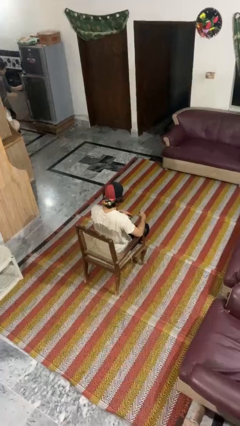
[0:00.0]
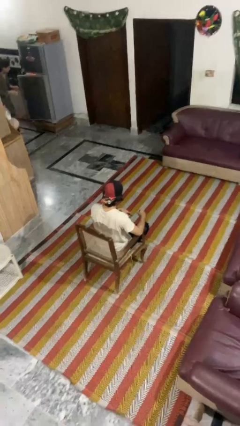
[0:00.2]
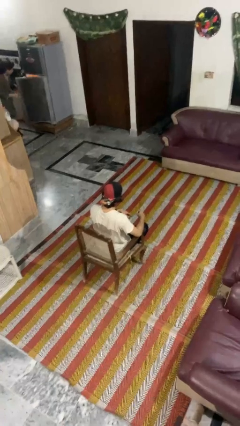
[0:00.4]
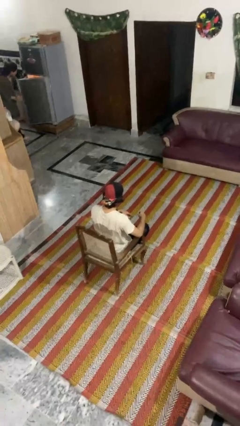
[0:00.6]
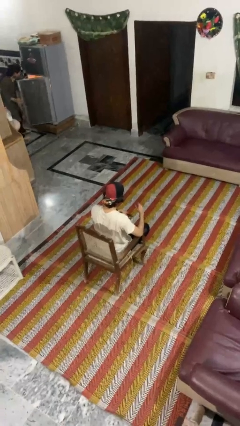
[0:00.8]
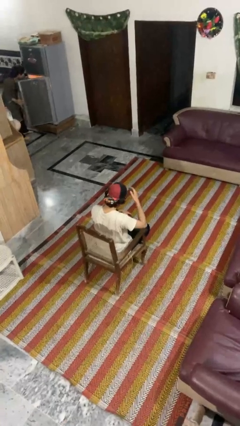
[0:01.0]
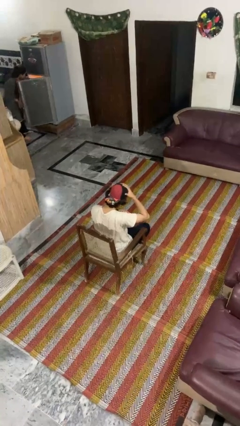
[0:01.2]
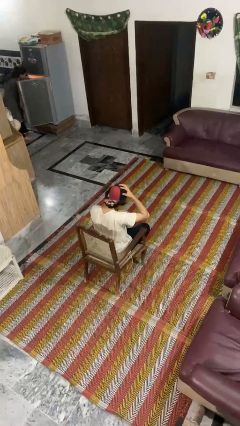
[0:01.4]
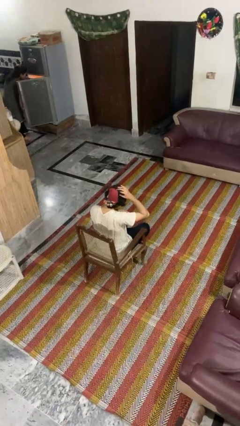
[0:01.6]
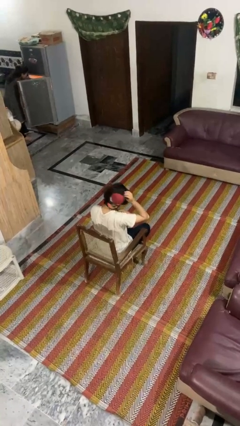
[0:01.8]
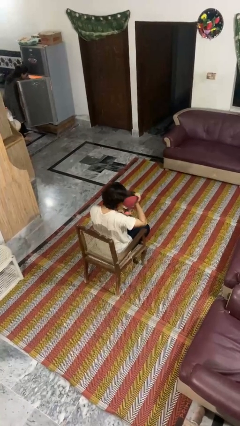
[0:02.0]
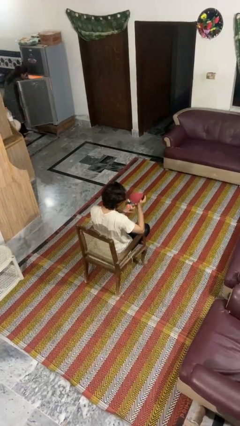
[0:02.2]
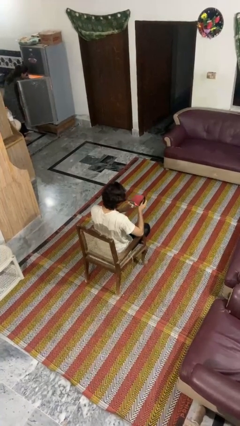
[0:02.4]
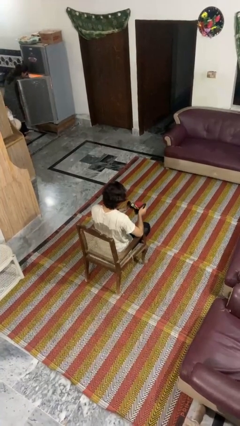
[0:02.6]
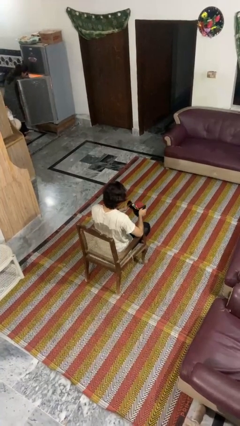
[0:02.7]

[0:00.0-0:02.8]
person takes off hat

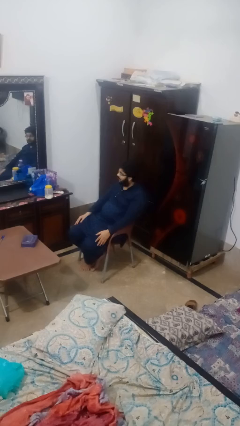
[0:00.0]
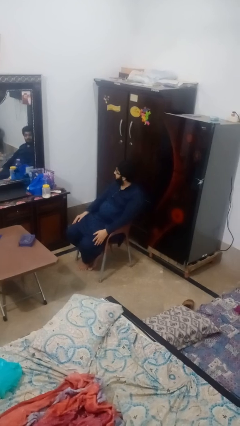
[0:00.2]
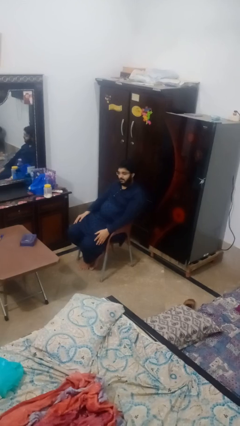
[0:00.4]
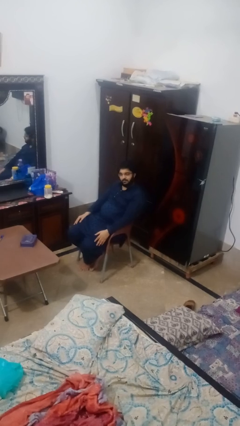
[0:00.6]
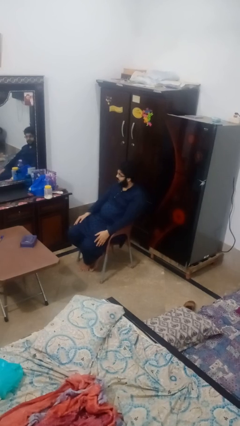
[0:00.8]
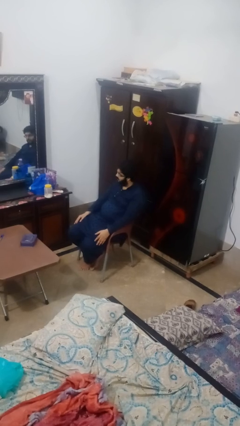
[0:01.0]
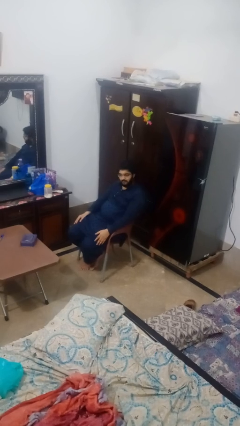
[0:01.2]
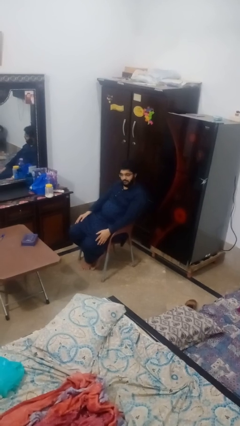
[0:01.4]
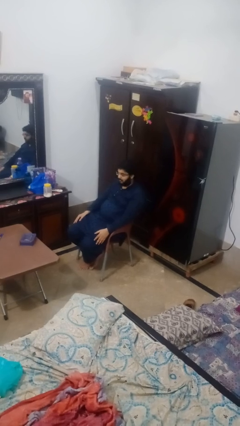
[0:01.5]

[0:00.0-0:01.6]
person shakes head

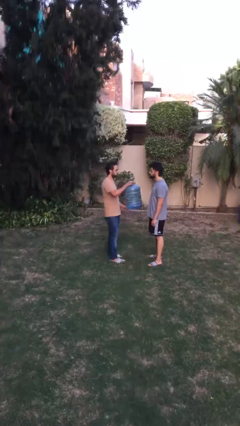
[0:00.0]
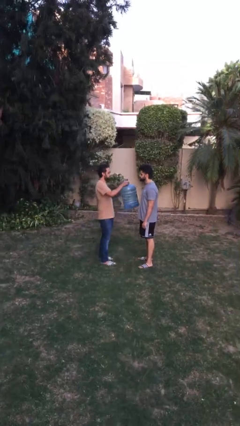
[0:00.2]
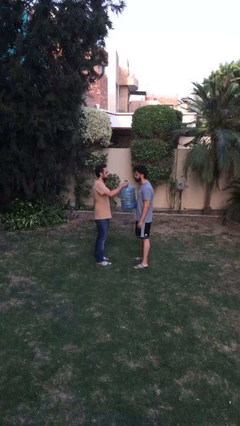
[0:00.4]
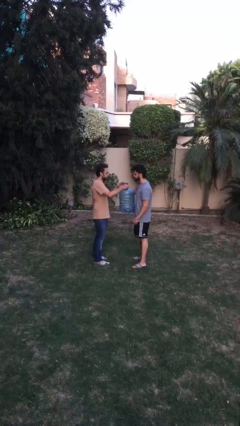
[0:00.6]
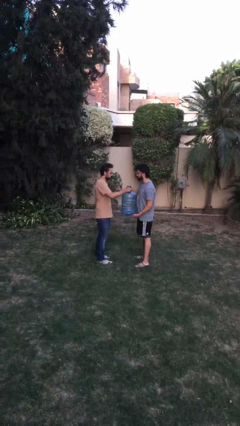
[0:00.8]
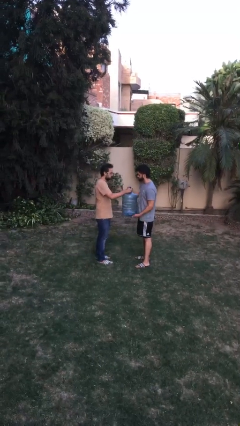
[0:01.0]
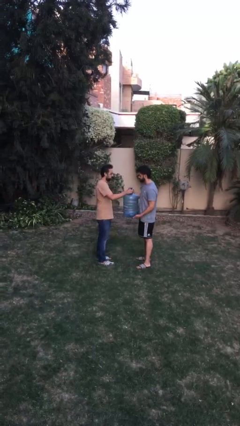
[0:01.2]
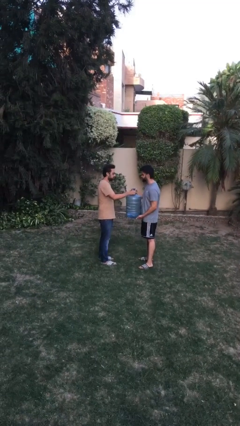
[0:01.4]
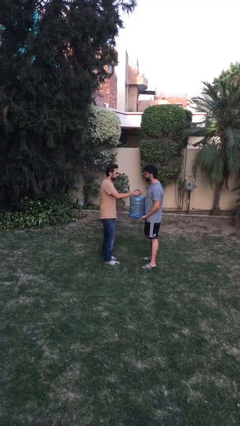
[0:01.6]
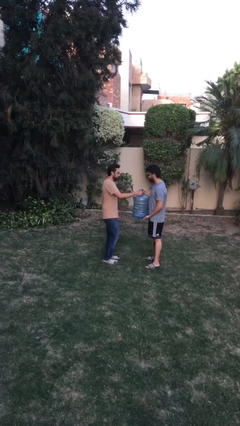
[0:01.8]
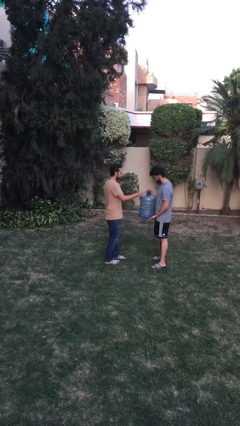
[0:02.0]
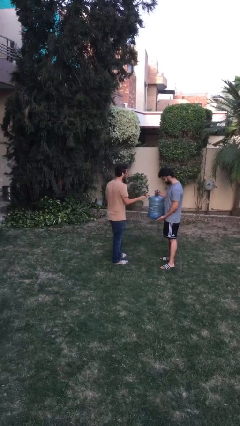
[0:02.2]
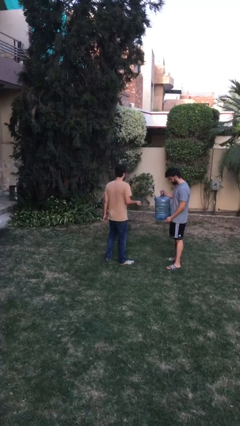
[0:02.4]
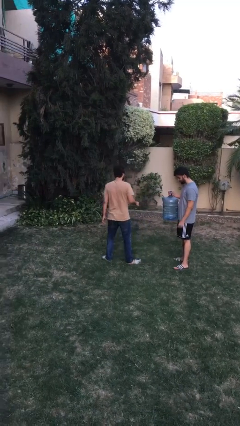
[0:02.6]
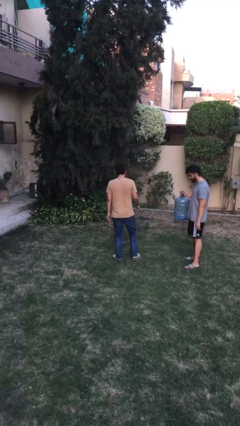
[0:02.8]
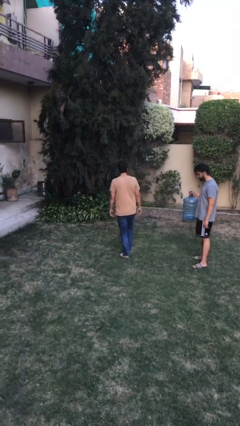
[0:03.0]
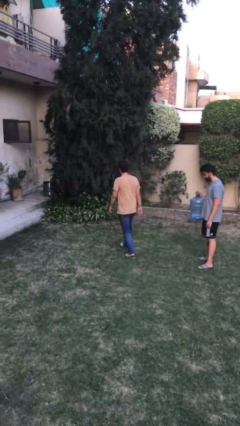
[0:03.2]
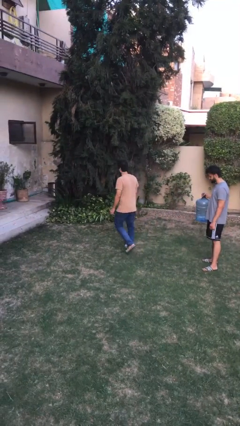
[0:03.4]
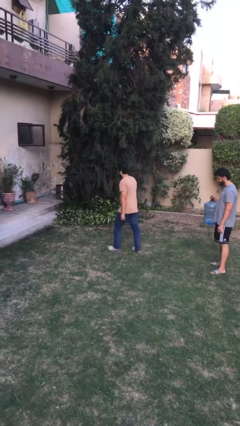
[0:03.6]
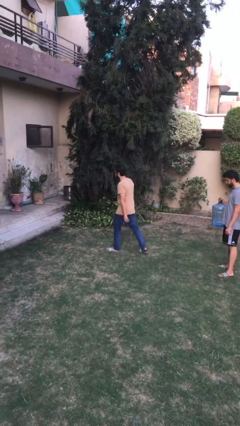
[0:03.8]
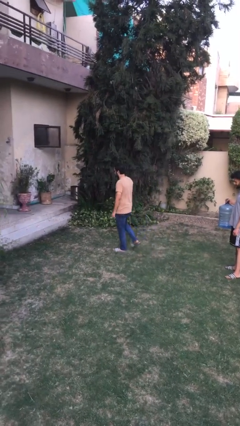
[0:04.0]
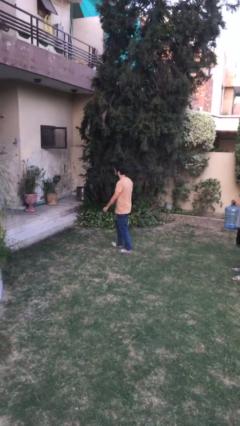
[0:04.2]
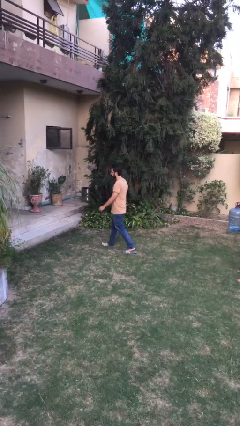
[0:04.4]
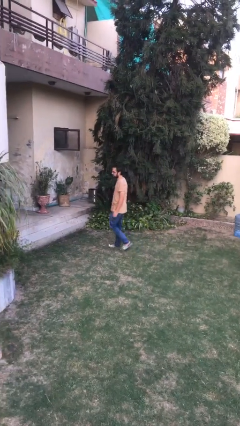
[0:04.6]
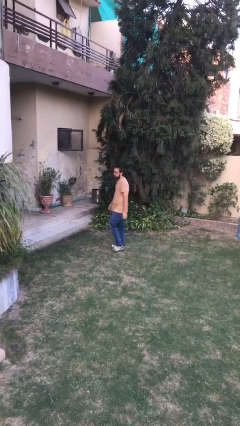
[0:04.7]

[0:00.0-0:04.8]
person transfers object to person

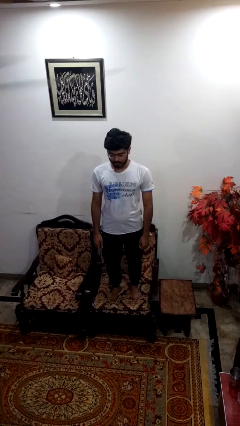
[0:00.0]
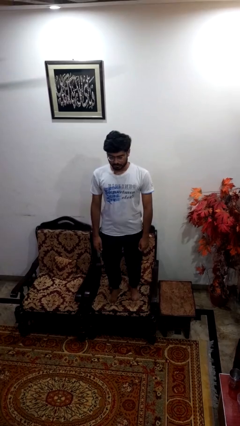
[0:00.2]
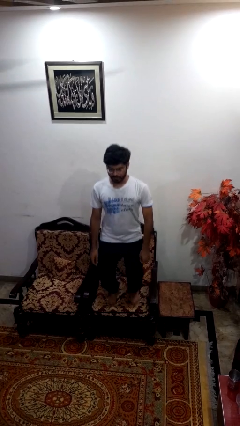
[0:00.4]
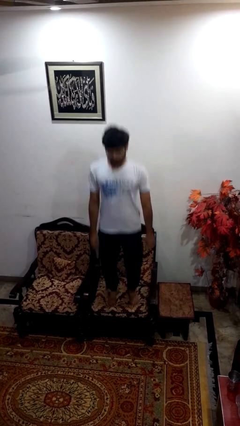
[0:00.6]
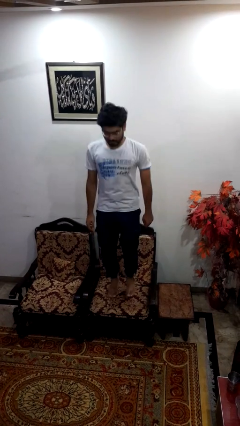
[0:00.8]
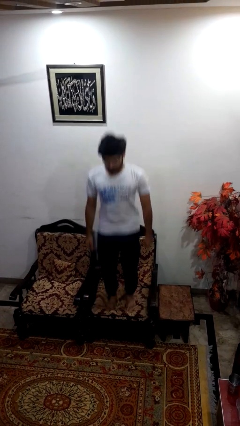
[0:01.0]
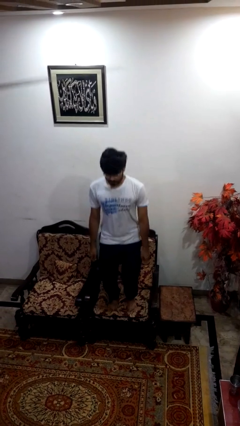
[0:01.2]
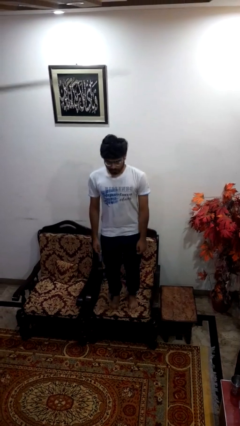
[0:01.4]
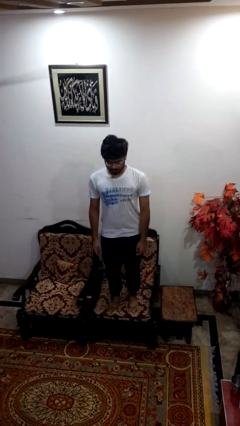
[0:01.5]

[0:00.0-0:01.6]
person jumps on couch

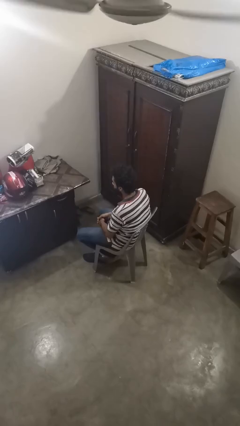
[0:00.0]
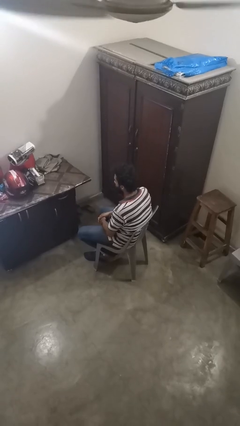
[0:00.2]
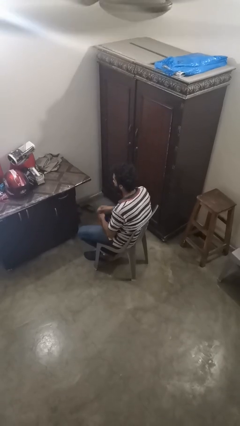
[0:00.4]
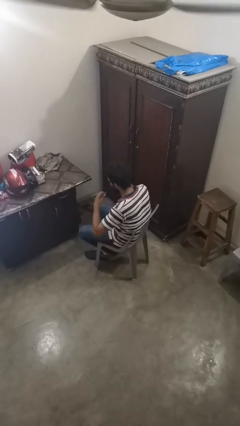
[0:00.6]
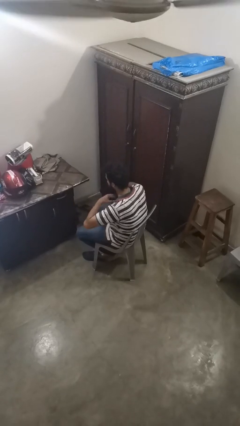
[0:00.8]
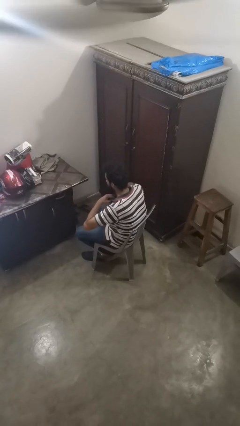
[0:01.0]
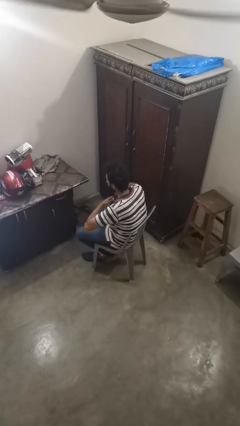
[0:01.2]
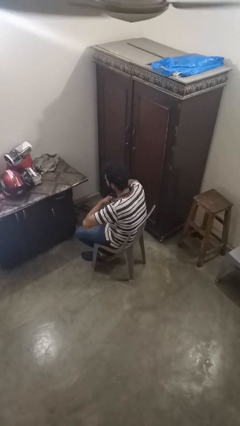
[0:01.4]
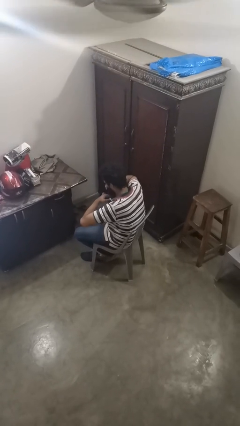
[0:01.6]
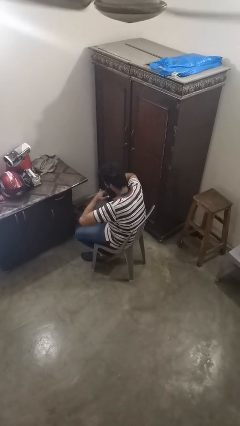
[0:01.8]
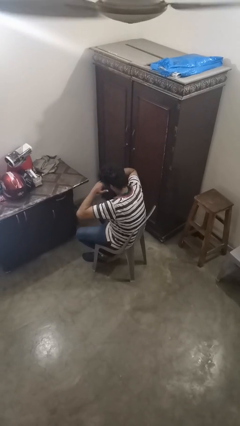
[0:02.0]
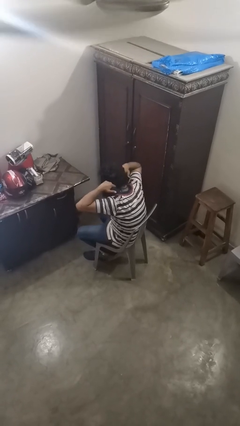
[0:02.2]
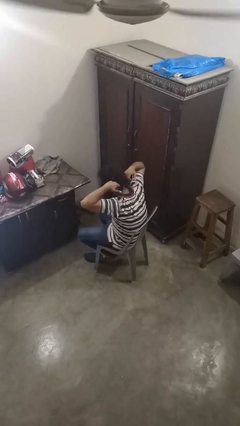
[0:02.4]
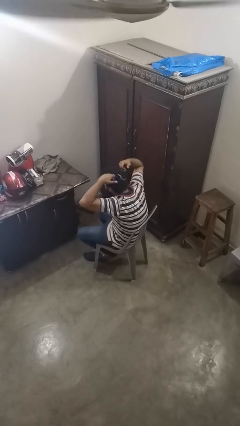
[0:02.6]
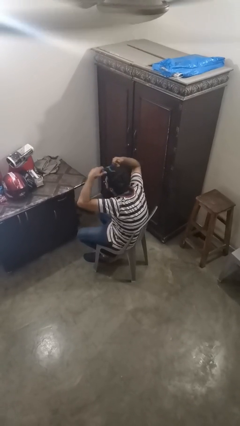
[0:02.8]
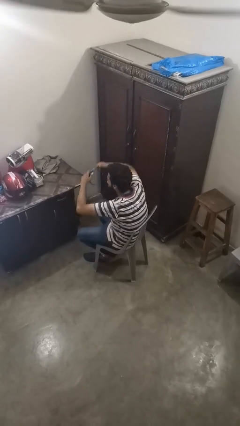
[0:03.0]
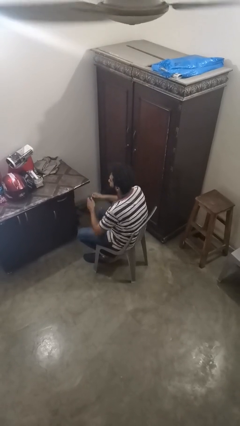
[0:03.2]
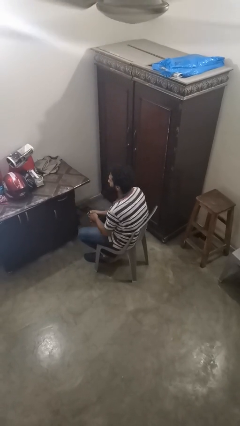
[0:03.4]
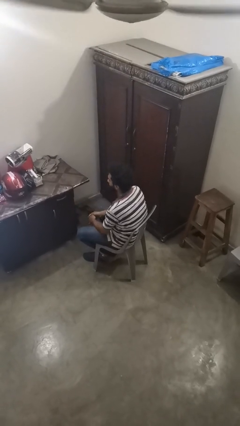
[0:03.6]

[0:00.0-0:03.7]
person takes off necklace

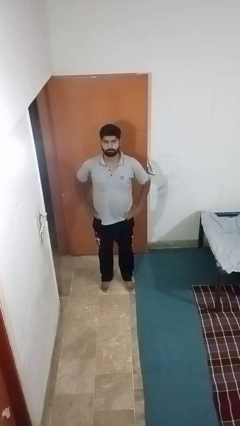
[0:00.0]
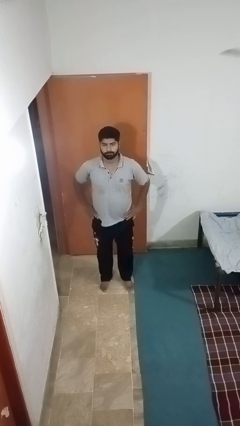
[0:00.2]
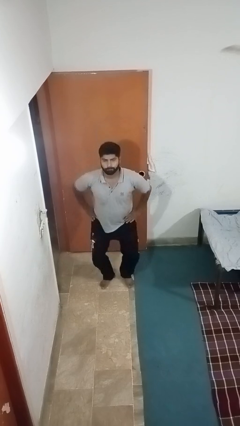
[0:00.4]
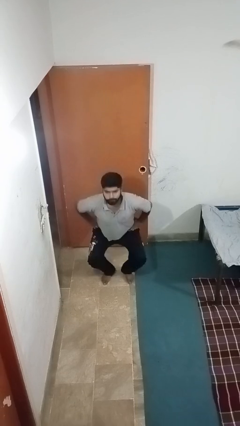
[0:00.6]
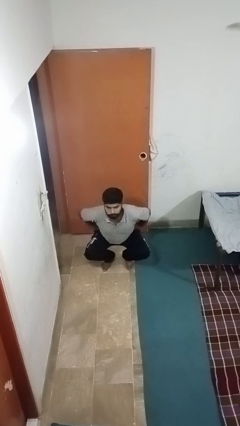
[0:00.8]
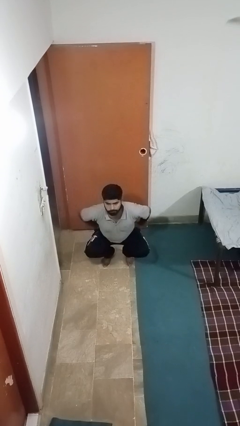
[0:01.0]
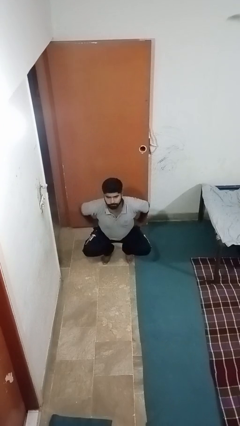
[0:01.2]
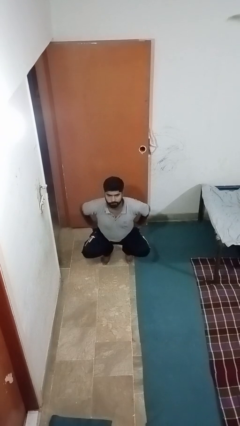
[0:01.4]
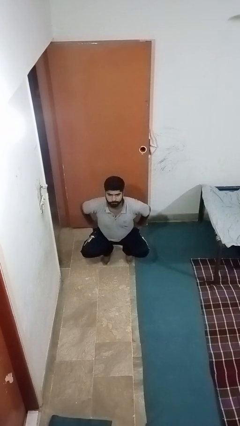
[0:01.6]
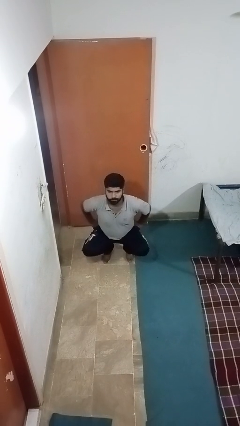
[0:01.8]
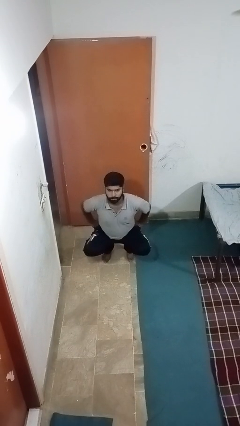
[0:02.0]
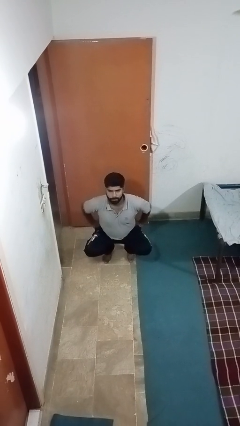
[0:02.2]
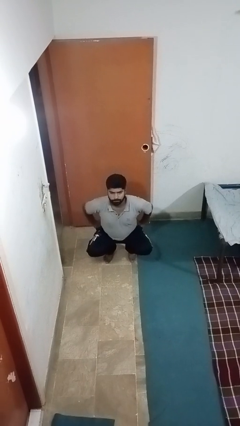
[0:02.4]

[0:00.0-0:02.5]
person squats

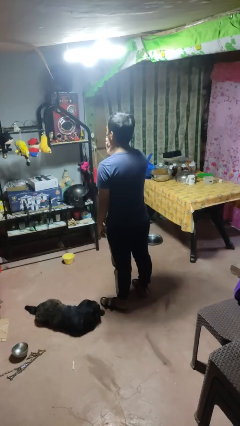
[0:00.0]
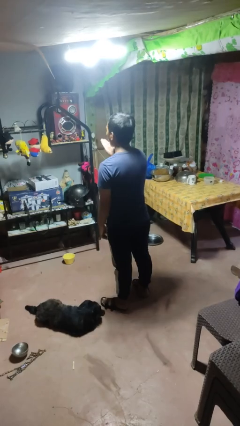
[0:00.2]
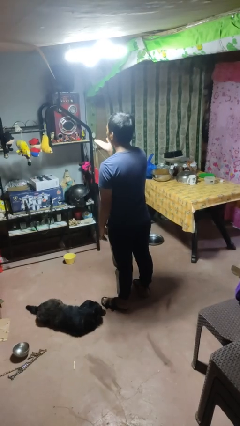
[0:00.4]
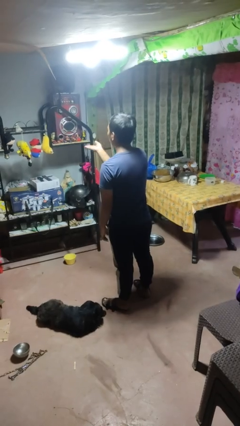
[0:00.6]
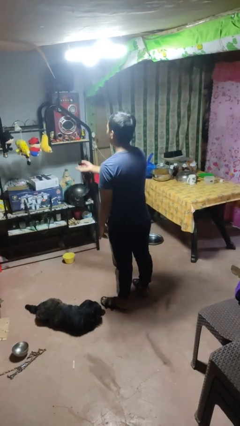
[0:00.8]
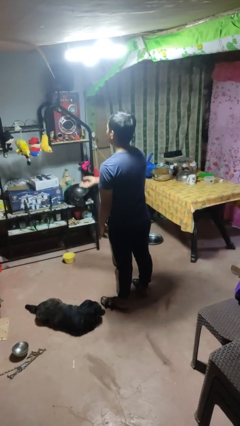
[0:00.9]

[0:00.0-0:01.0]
person gestures blow kiss
